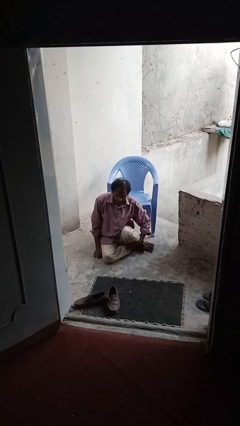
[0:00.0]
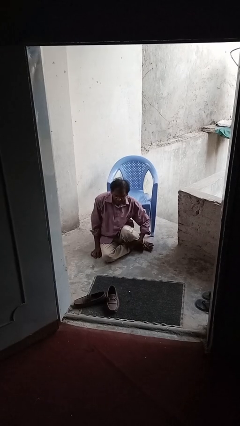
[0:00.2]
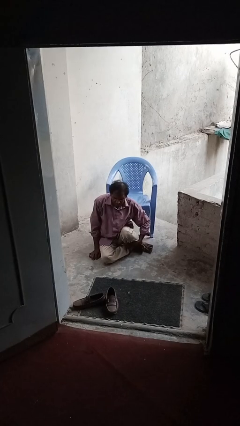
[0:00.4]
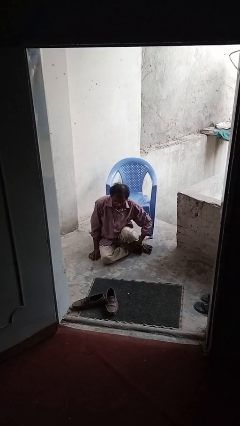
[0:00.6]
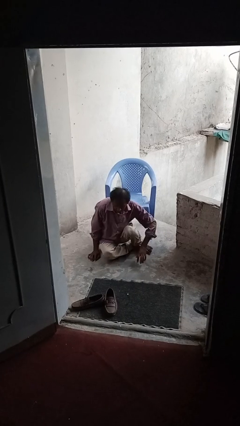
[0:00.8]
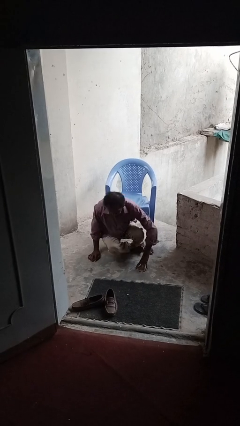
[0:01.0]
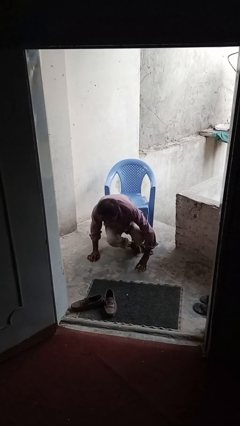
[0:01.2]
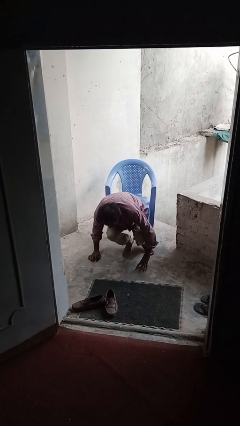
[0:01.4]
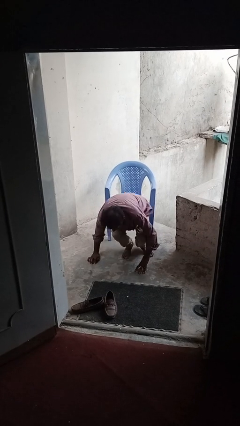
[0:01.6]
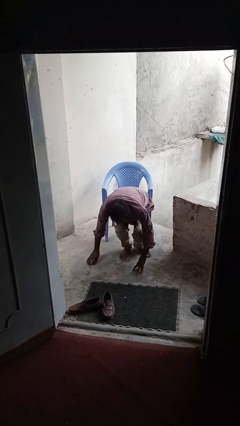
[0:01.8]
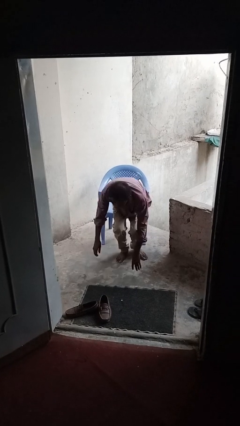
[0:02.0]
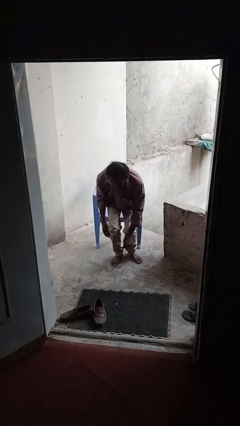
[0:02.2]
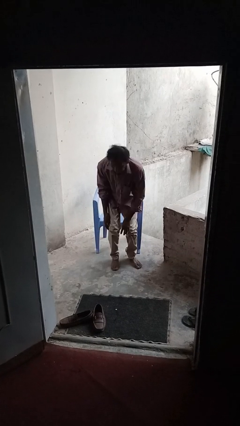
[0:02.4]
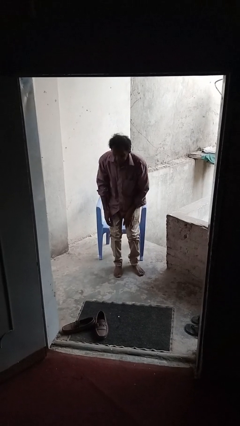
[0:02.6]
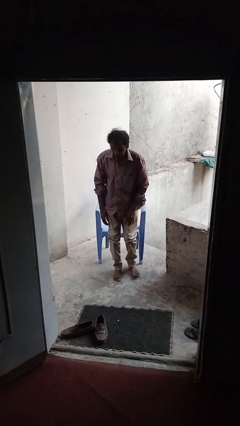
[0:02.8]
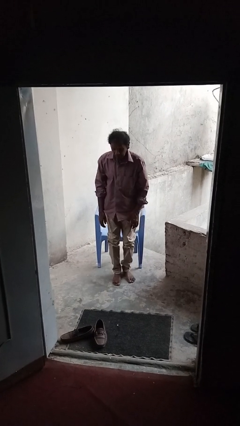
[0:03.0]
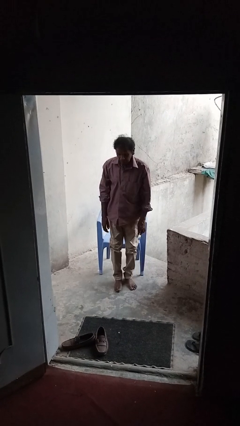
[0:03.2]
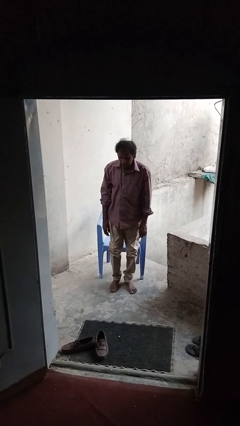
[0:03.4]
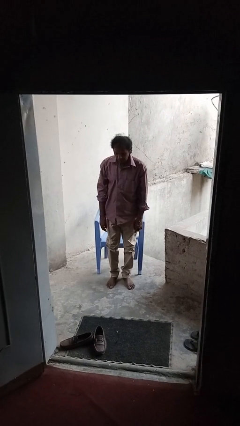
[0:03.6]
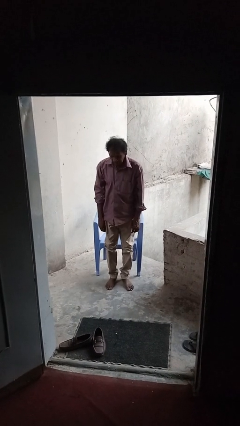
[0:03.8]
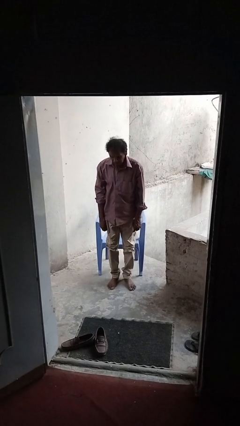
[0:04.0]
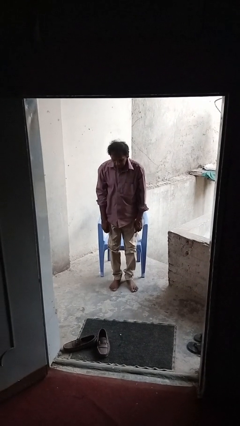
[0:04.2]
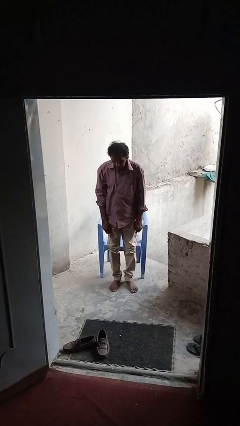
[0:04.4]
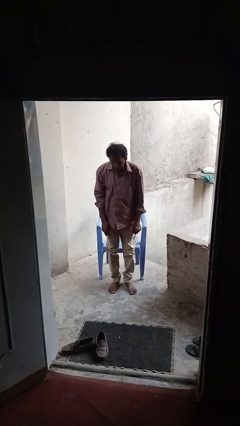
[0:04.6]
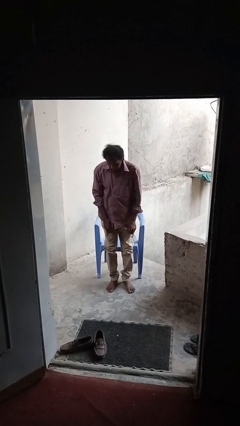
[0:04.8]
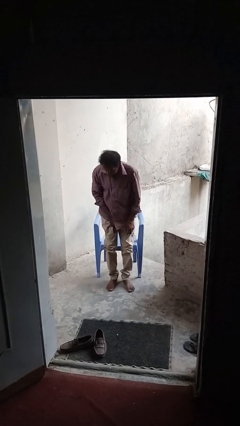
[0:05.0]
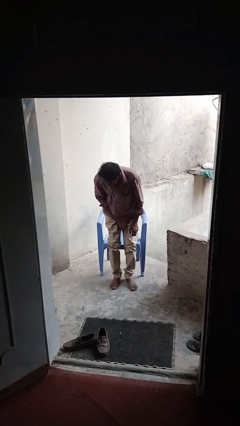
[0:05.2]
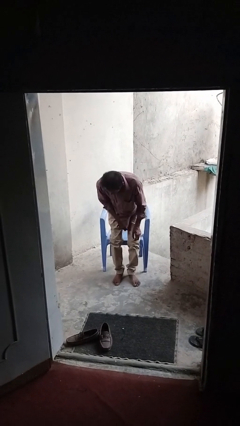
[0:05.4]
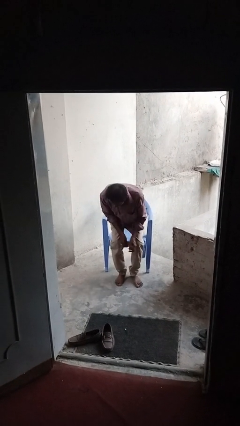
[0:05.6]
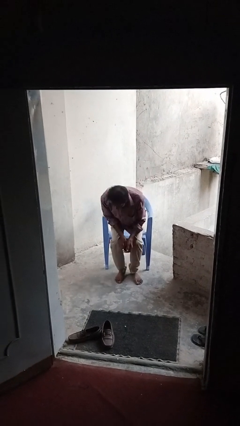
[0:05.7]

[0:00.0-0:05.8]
person stands up from floor

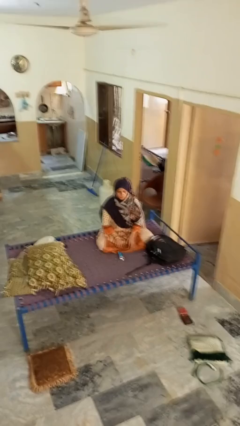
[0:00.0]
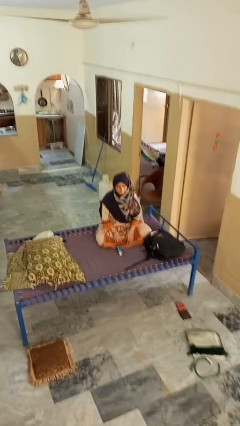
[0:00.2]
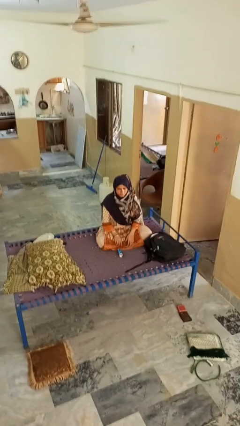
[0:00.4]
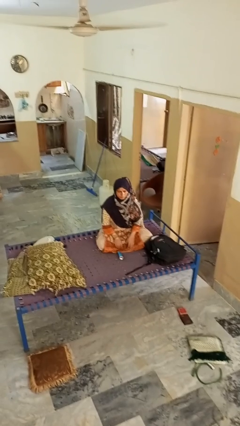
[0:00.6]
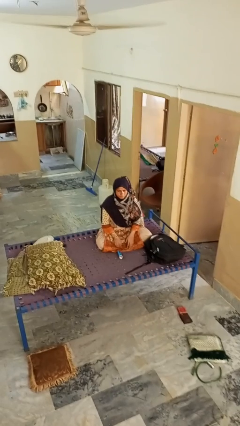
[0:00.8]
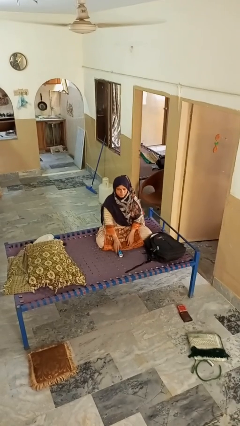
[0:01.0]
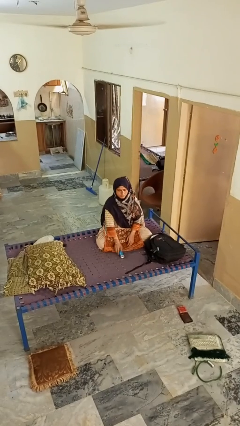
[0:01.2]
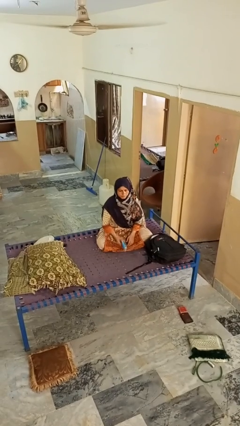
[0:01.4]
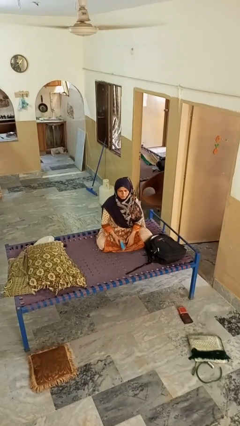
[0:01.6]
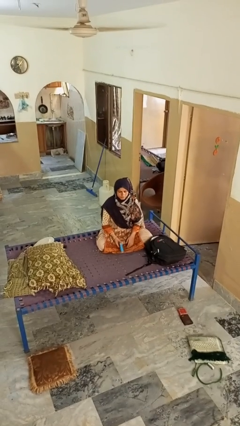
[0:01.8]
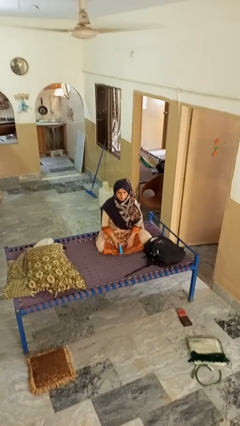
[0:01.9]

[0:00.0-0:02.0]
person picks up object from floor

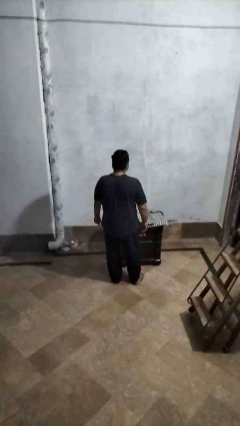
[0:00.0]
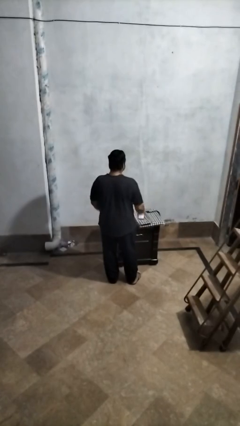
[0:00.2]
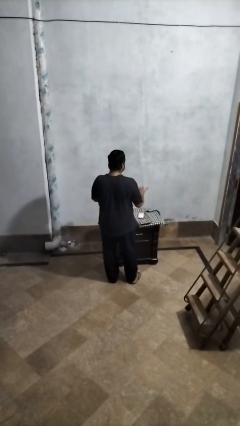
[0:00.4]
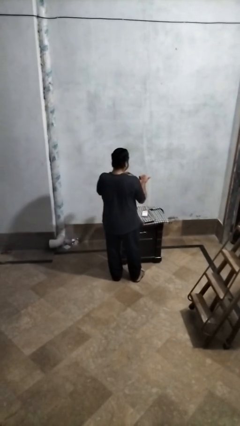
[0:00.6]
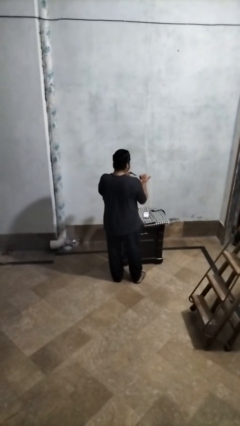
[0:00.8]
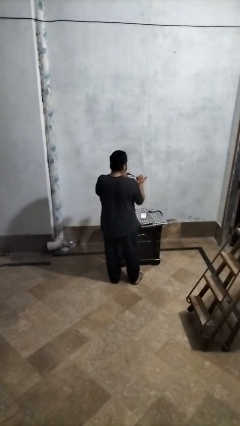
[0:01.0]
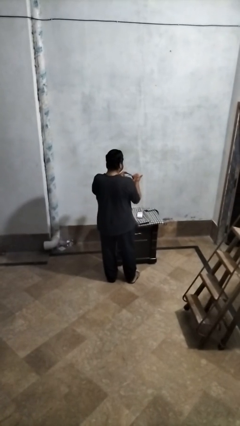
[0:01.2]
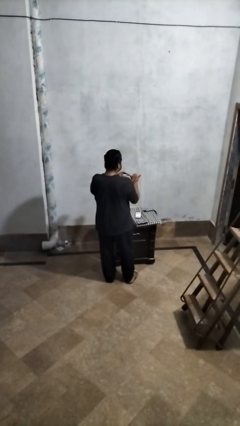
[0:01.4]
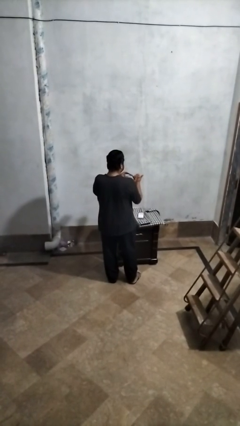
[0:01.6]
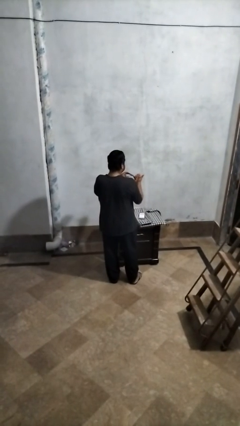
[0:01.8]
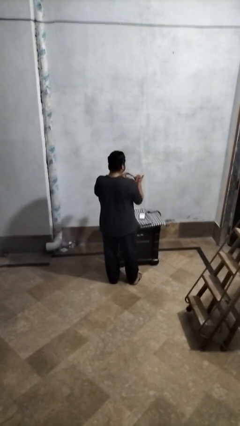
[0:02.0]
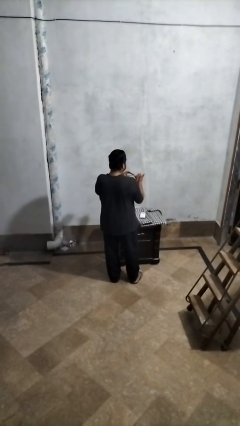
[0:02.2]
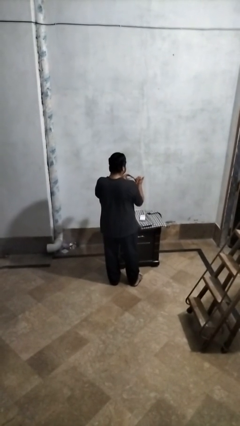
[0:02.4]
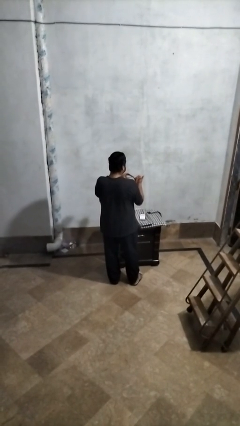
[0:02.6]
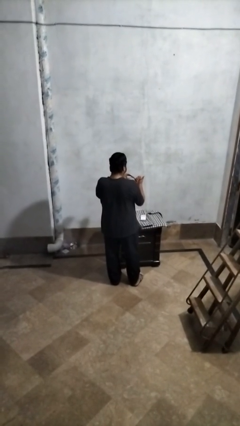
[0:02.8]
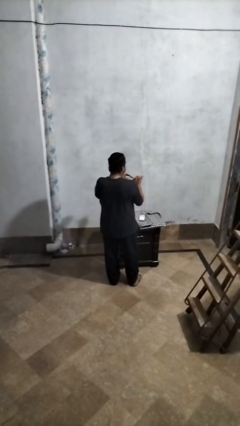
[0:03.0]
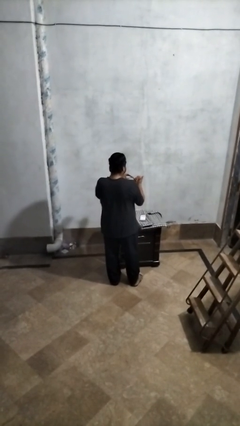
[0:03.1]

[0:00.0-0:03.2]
person clips fingernails

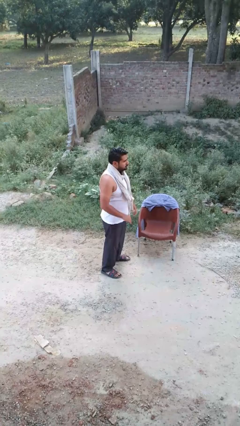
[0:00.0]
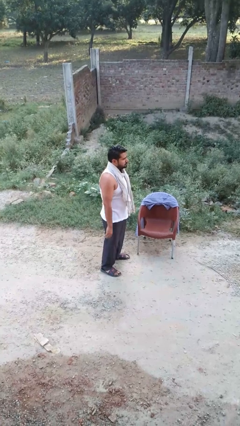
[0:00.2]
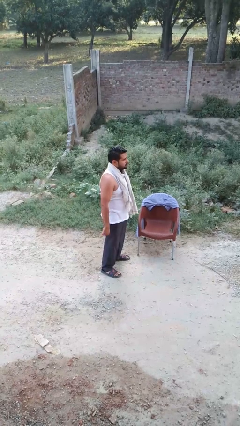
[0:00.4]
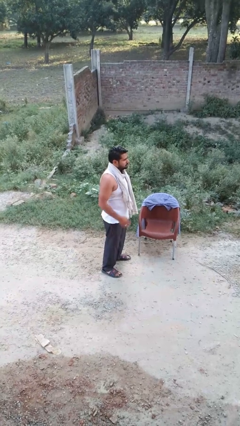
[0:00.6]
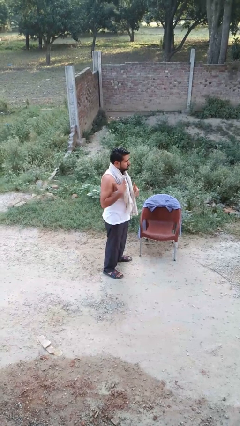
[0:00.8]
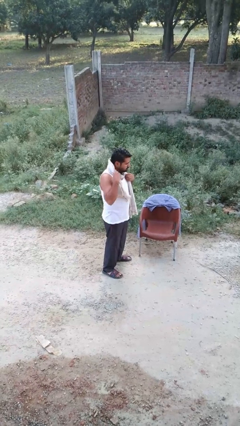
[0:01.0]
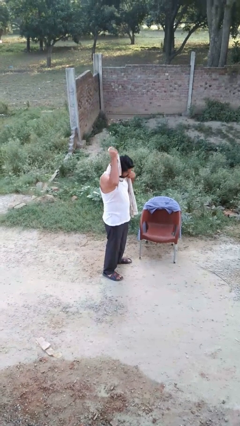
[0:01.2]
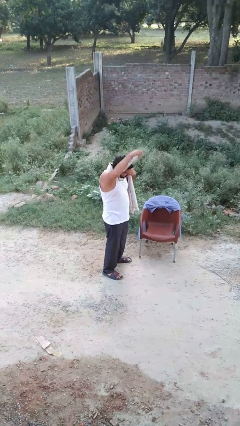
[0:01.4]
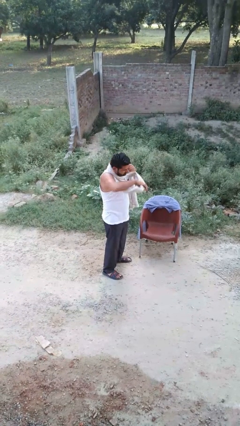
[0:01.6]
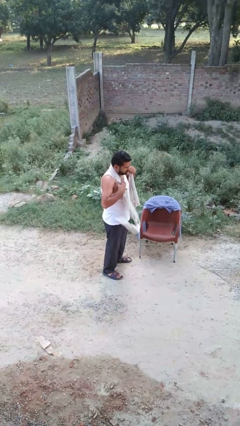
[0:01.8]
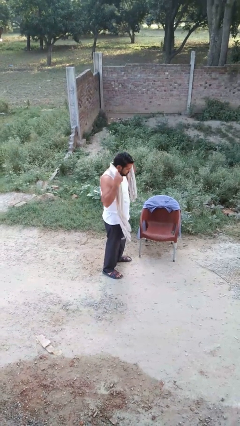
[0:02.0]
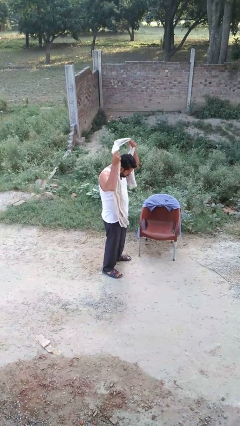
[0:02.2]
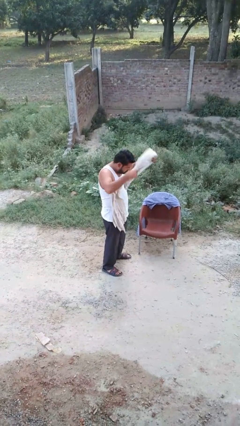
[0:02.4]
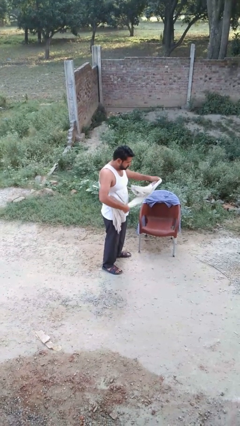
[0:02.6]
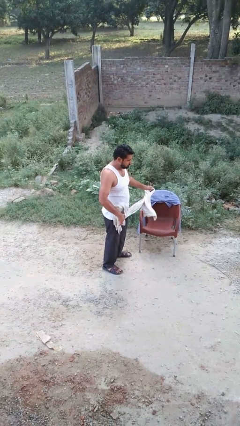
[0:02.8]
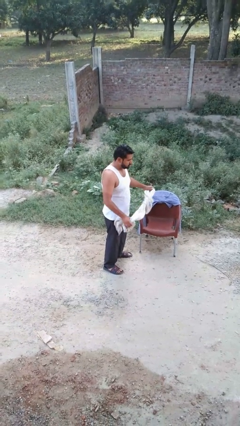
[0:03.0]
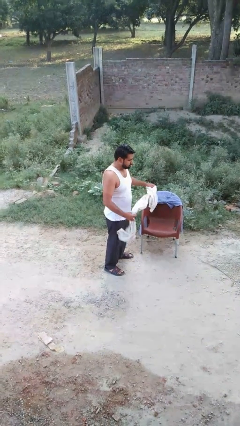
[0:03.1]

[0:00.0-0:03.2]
person takes off scarf

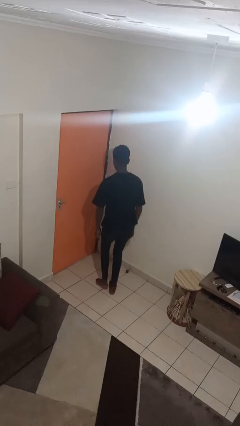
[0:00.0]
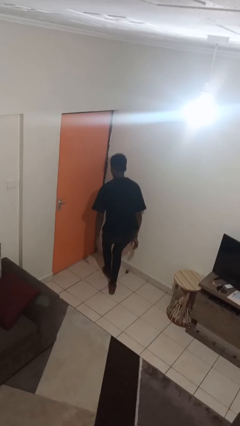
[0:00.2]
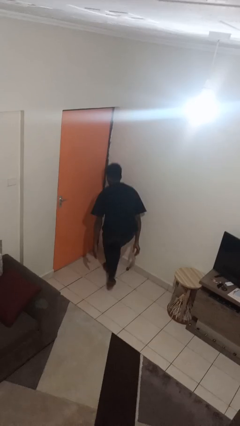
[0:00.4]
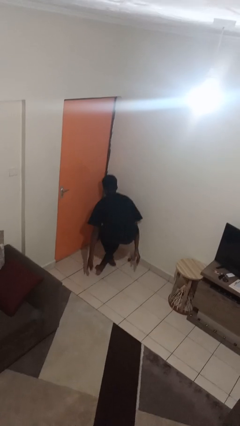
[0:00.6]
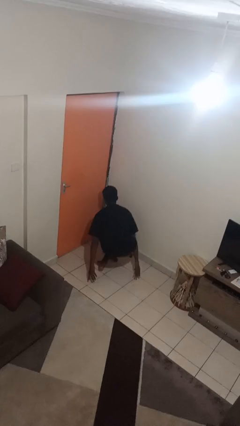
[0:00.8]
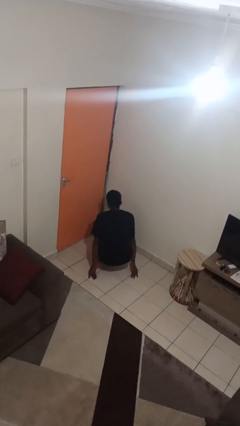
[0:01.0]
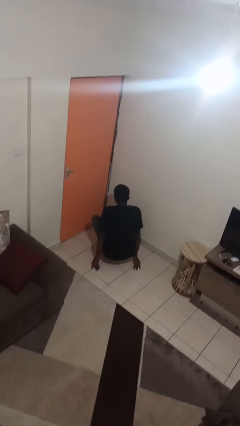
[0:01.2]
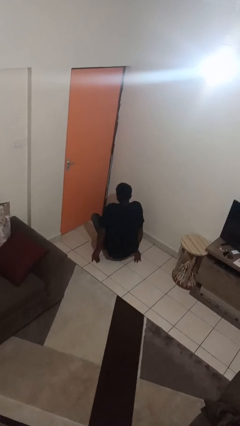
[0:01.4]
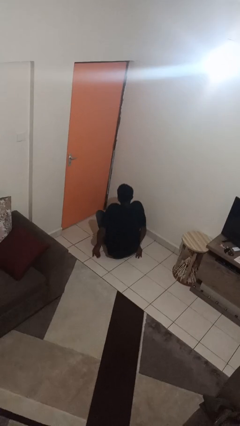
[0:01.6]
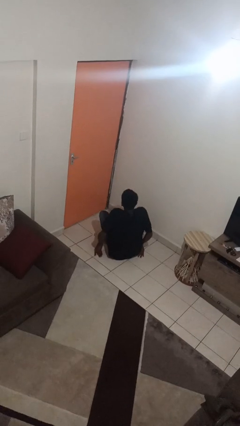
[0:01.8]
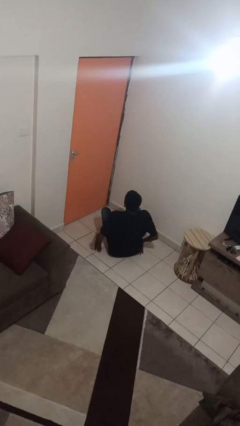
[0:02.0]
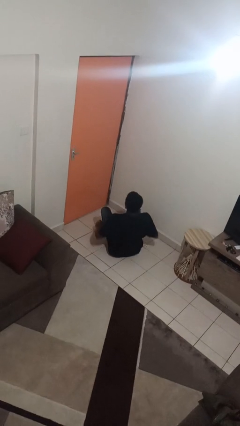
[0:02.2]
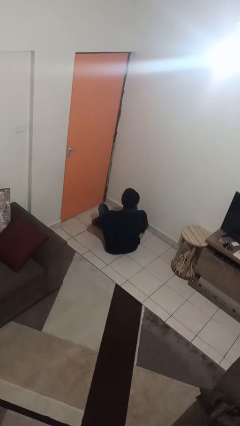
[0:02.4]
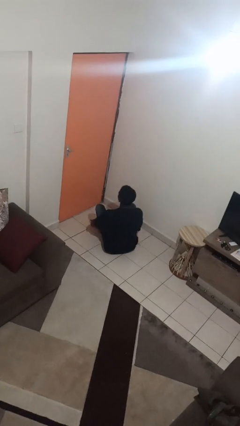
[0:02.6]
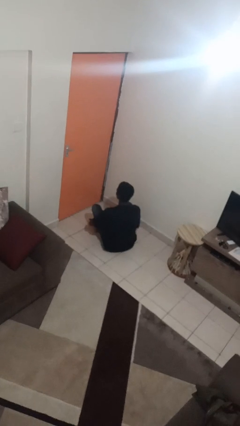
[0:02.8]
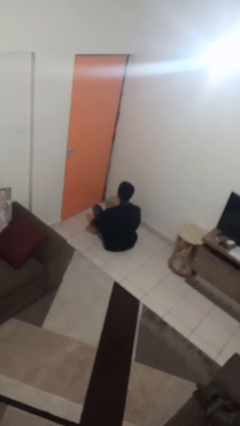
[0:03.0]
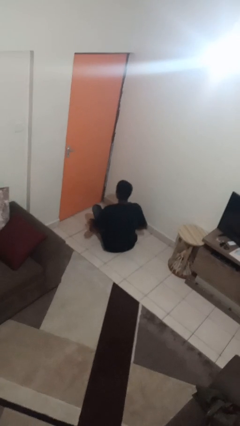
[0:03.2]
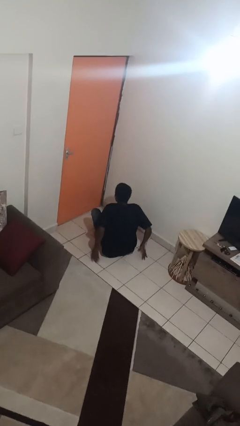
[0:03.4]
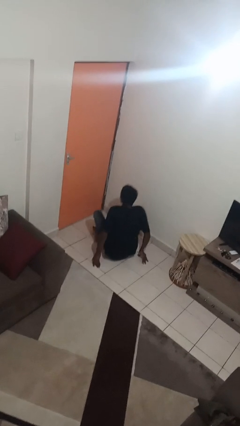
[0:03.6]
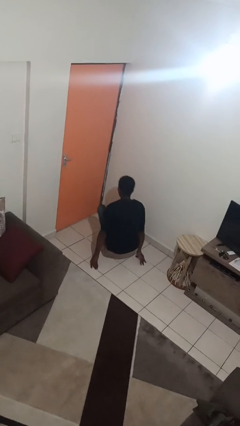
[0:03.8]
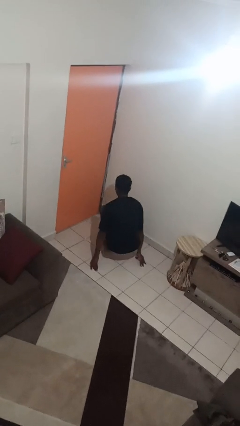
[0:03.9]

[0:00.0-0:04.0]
person sits crisscross
